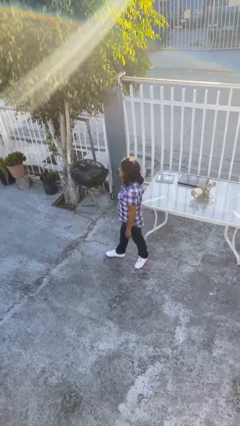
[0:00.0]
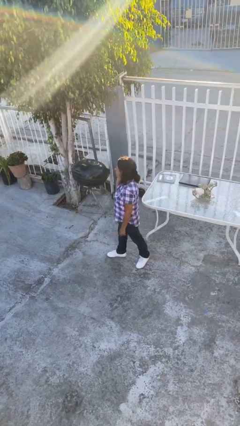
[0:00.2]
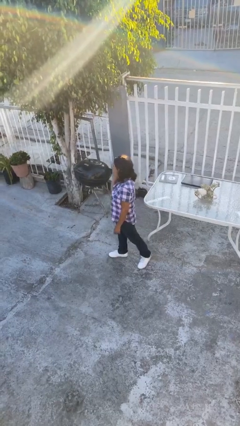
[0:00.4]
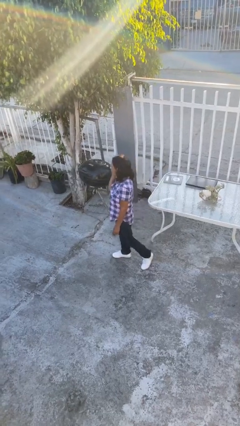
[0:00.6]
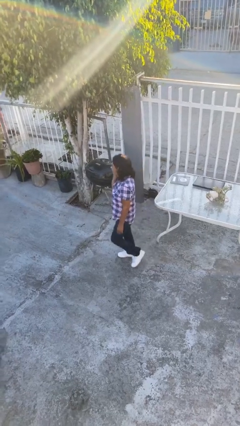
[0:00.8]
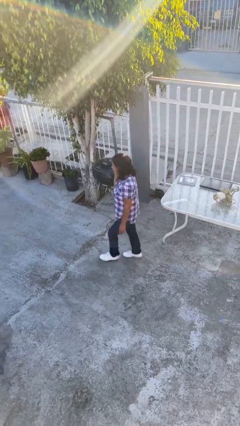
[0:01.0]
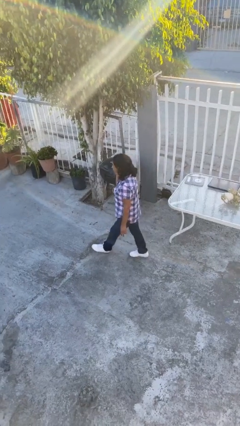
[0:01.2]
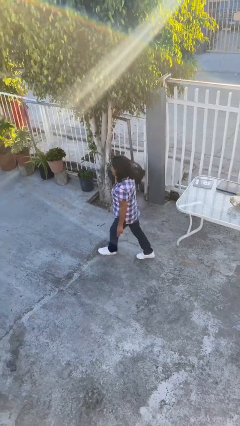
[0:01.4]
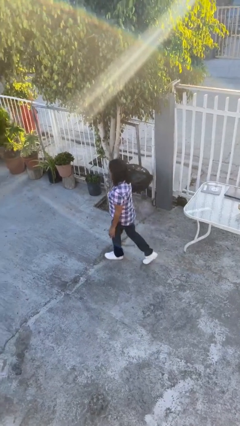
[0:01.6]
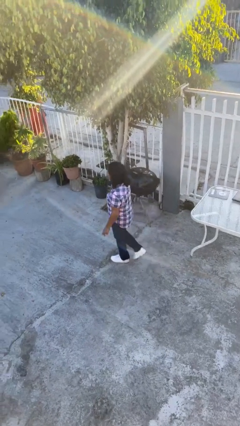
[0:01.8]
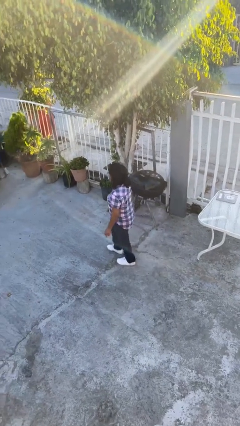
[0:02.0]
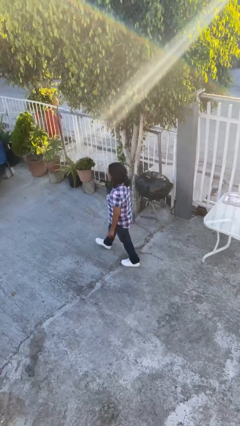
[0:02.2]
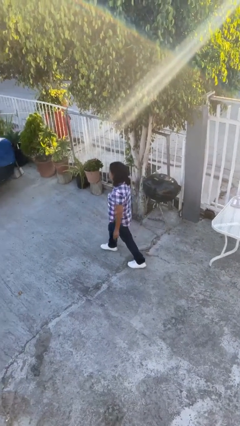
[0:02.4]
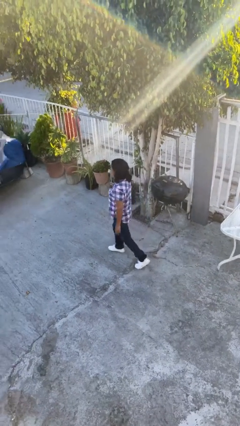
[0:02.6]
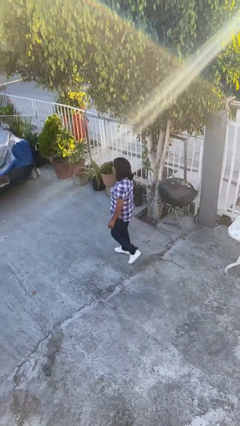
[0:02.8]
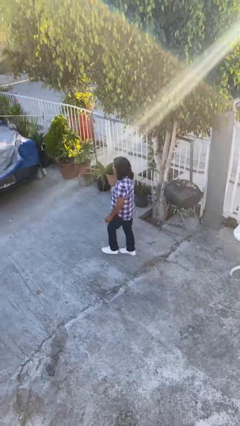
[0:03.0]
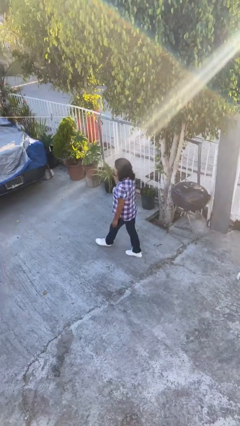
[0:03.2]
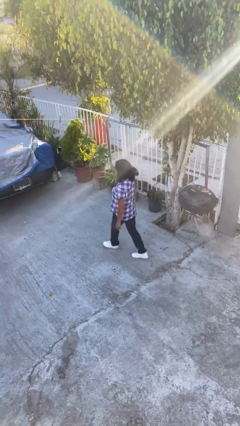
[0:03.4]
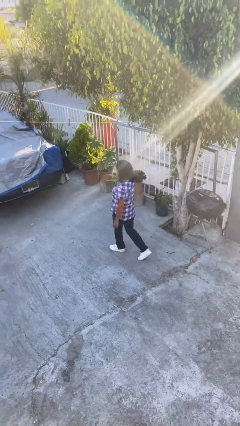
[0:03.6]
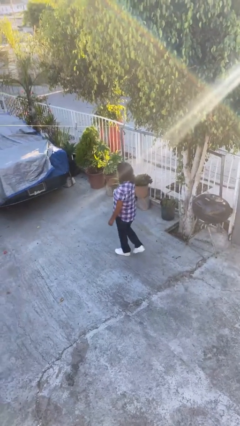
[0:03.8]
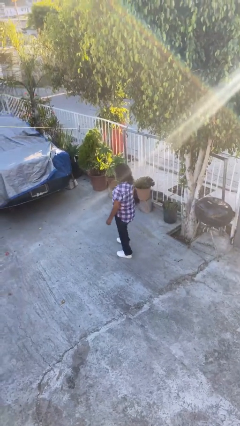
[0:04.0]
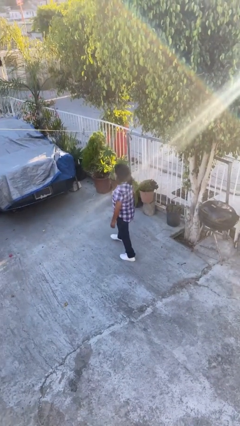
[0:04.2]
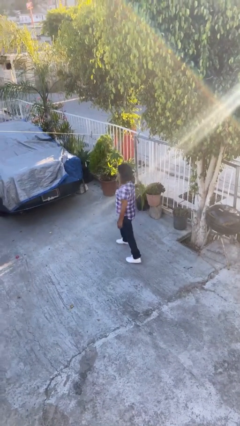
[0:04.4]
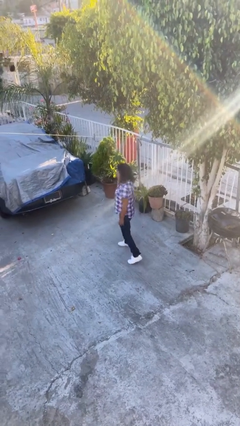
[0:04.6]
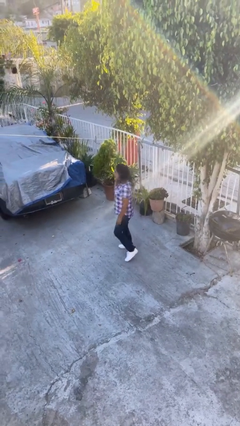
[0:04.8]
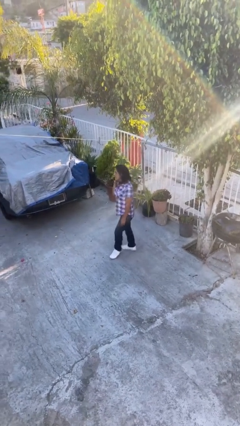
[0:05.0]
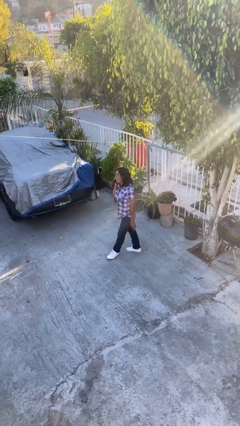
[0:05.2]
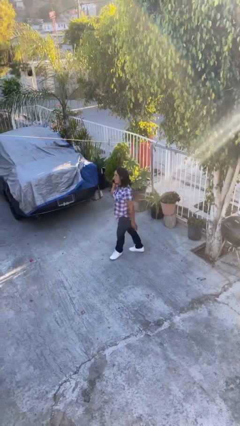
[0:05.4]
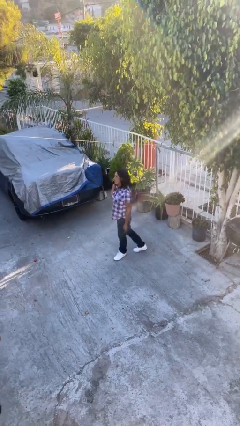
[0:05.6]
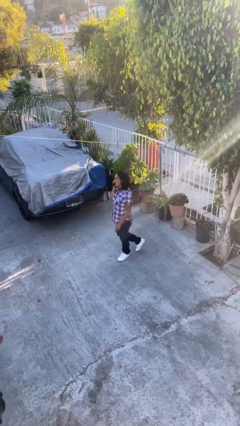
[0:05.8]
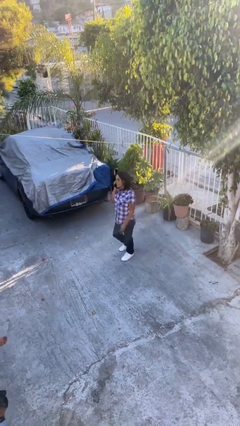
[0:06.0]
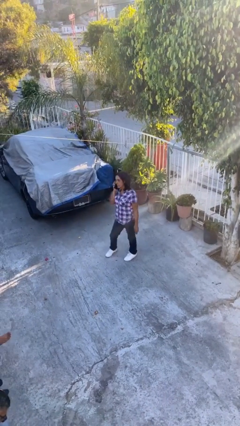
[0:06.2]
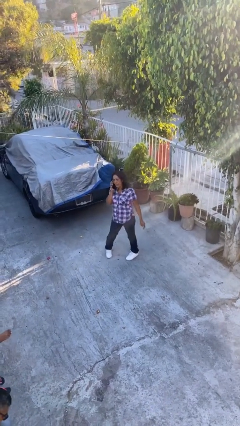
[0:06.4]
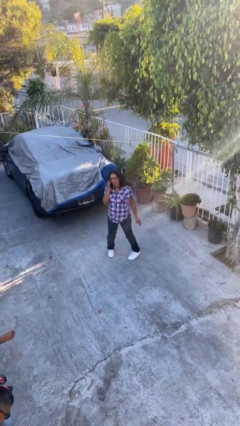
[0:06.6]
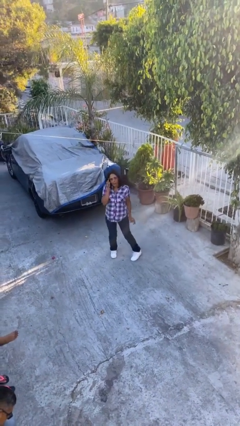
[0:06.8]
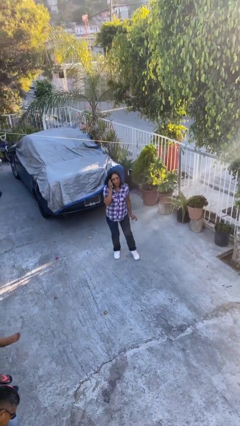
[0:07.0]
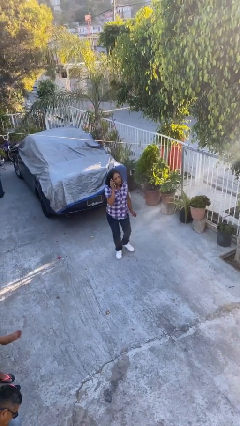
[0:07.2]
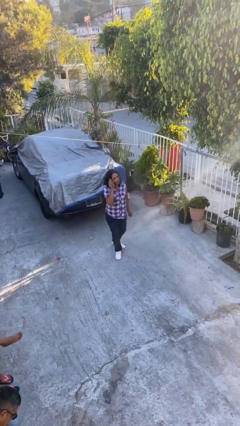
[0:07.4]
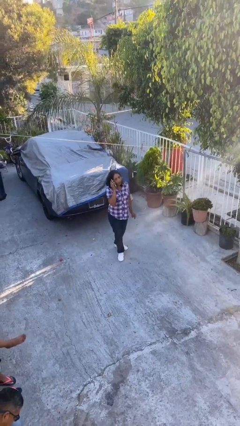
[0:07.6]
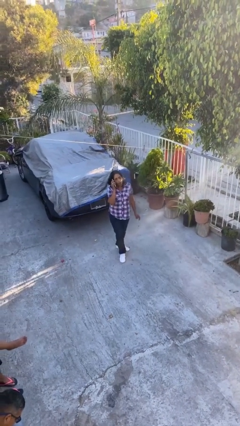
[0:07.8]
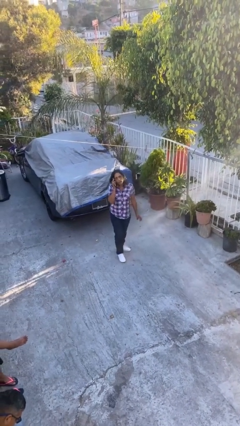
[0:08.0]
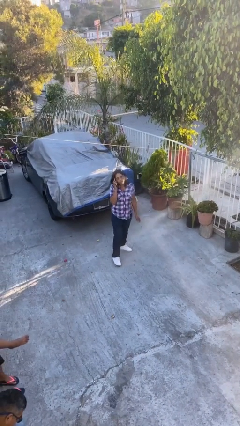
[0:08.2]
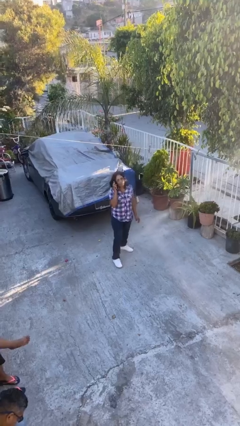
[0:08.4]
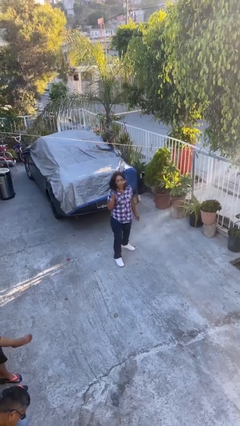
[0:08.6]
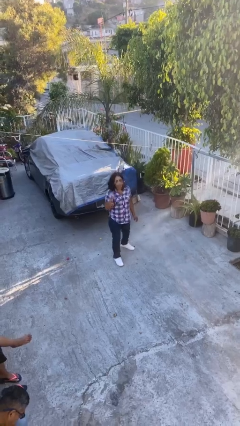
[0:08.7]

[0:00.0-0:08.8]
person talks on phone

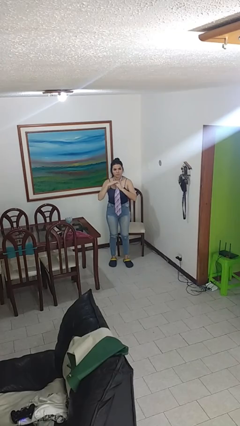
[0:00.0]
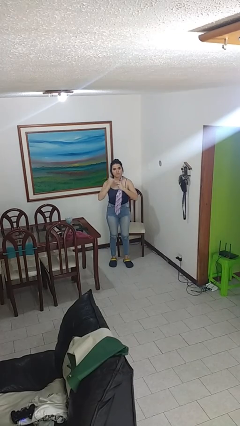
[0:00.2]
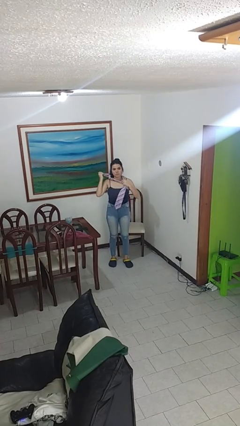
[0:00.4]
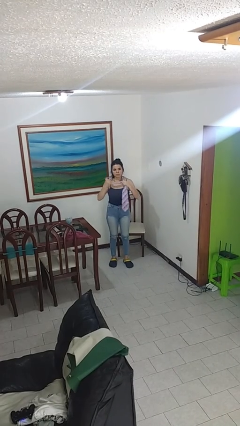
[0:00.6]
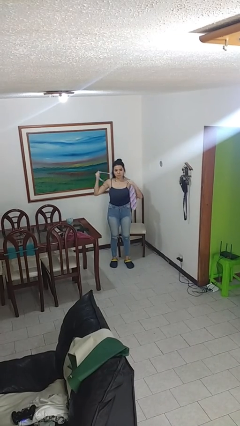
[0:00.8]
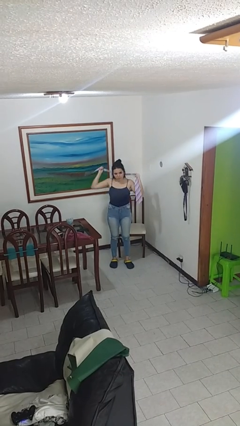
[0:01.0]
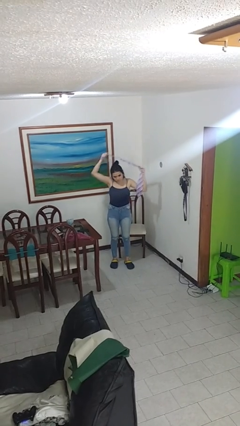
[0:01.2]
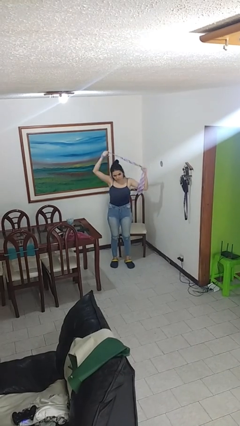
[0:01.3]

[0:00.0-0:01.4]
person takes off necktie

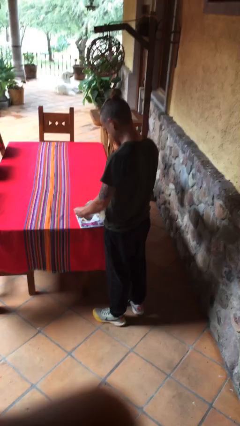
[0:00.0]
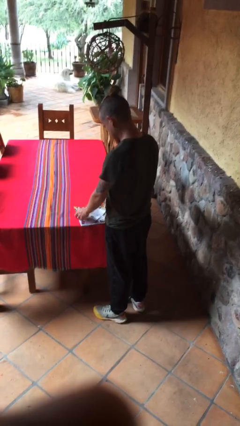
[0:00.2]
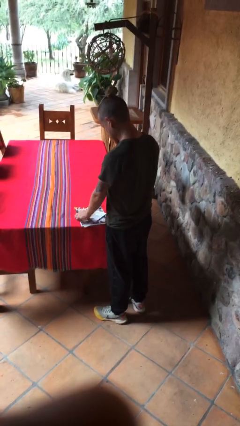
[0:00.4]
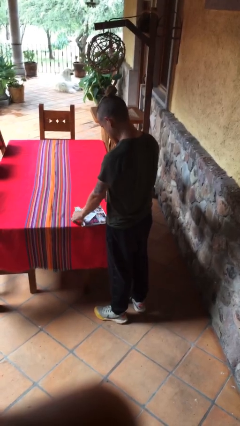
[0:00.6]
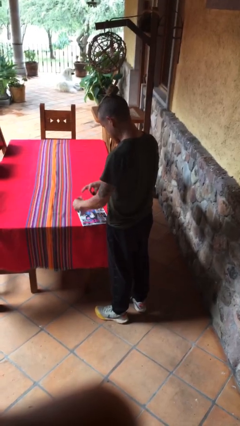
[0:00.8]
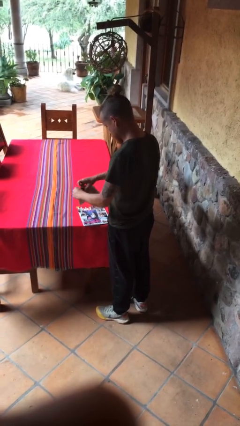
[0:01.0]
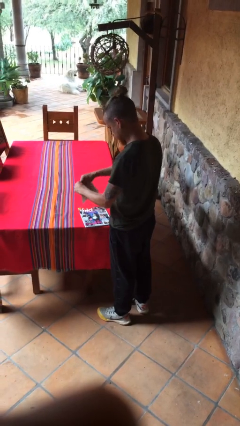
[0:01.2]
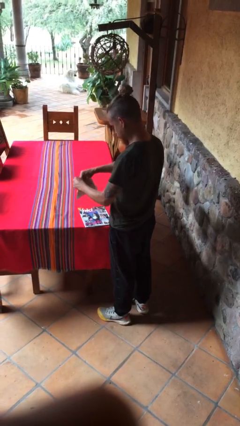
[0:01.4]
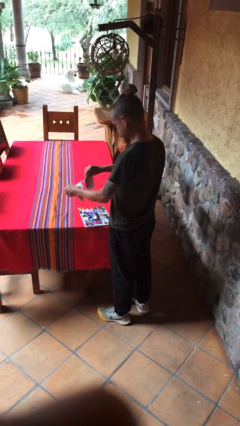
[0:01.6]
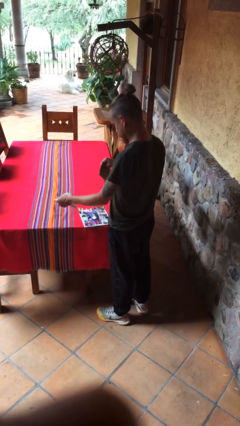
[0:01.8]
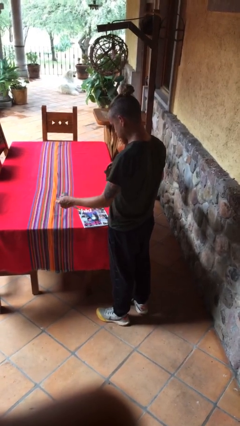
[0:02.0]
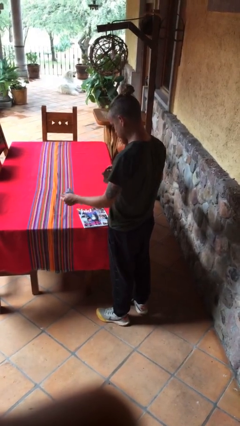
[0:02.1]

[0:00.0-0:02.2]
person tears paper

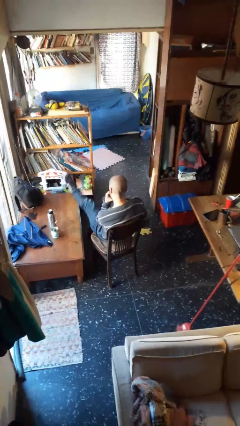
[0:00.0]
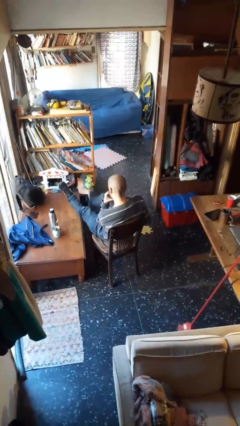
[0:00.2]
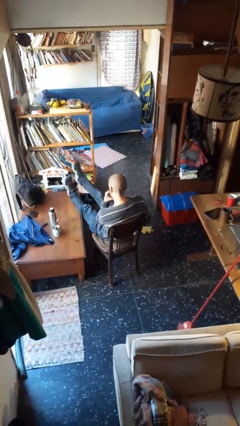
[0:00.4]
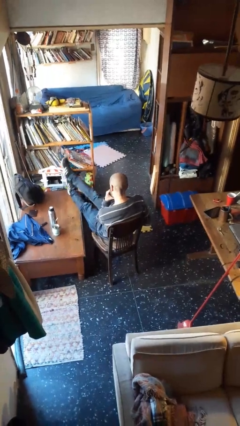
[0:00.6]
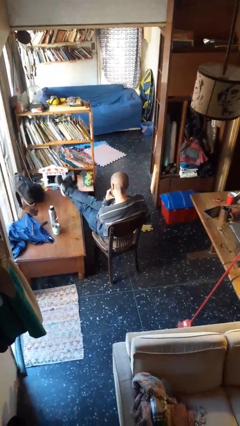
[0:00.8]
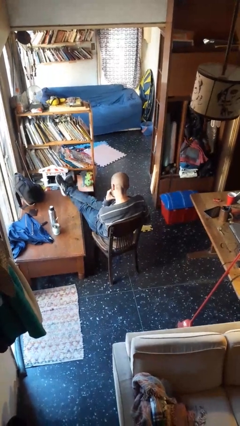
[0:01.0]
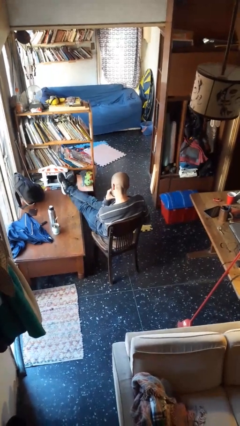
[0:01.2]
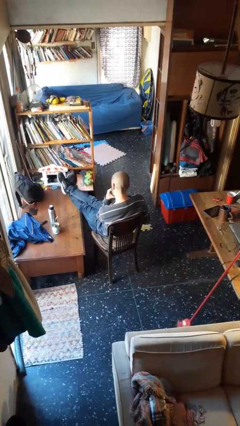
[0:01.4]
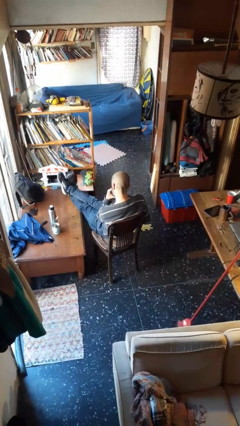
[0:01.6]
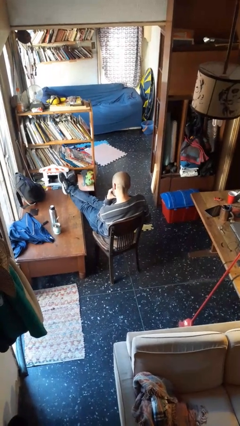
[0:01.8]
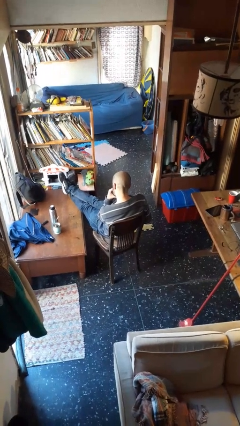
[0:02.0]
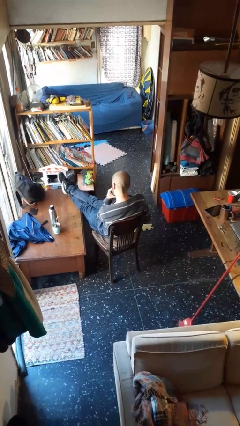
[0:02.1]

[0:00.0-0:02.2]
person puts feet up

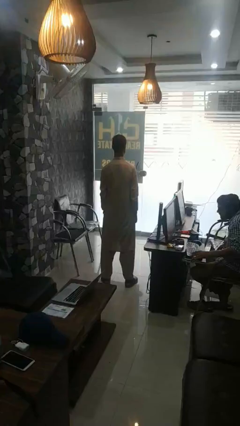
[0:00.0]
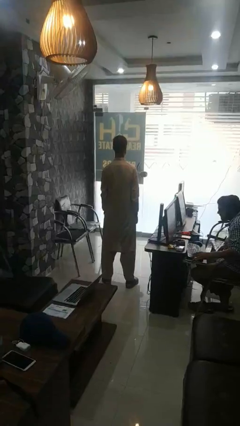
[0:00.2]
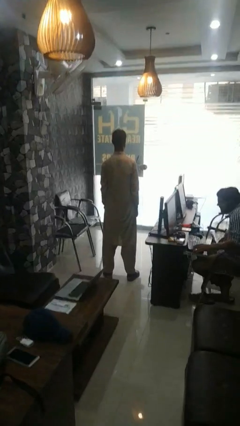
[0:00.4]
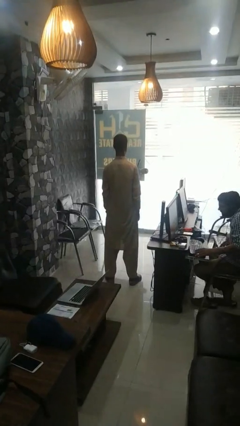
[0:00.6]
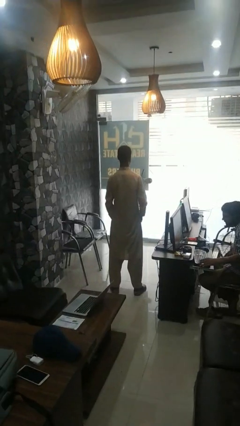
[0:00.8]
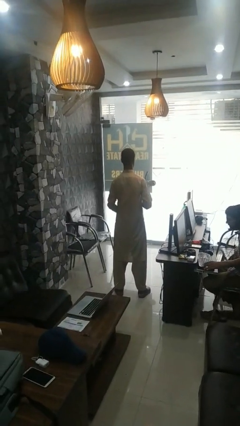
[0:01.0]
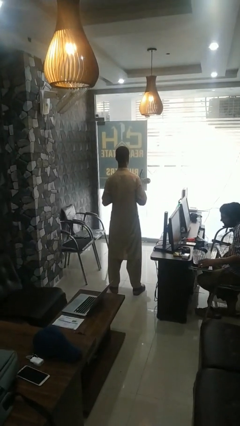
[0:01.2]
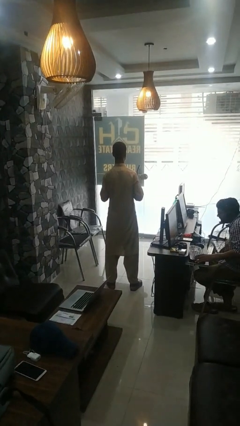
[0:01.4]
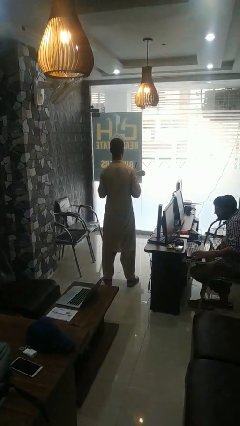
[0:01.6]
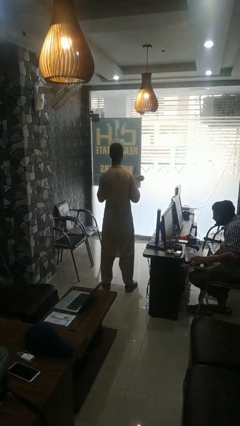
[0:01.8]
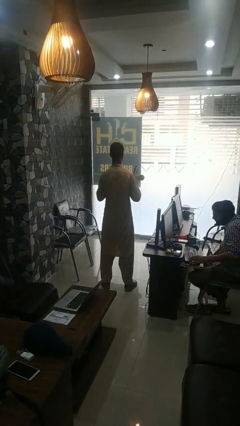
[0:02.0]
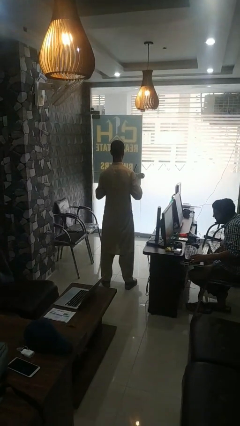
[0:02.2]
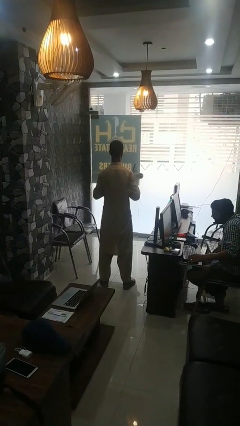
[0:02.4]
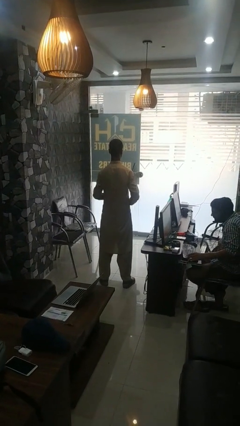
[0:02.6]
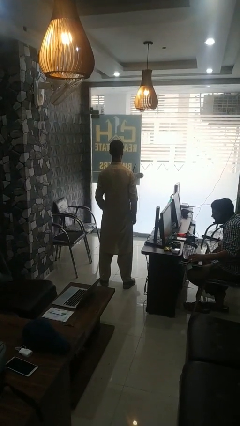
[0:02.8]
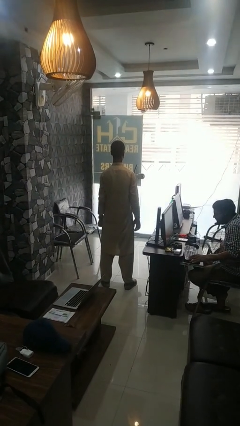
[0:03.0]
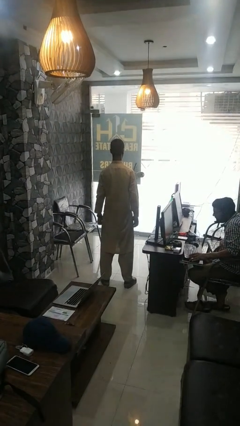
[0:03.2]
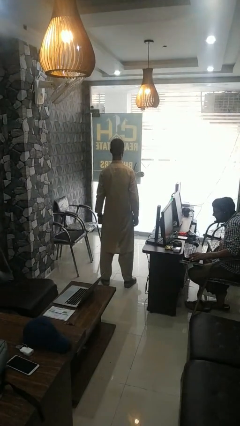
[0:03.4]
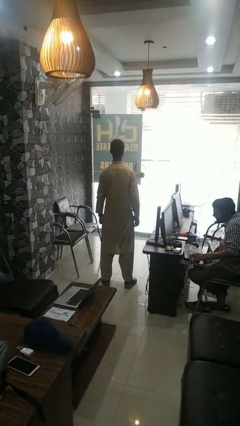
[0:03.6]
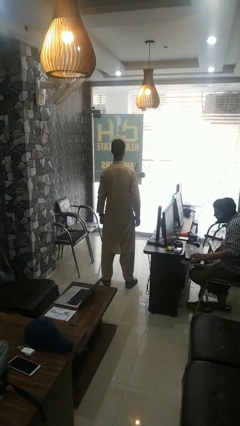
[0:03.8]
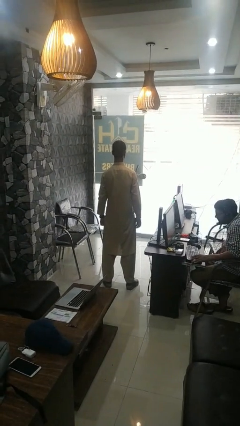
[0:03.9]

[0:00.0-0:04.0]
person unbuttons shirt
